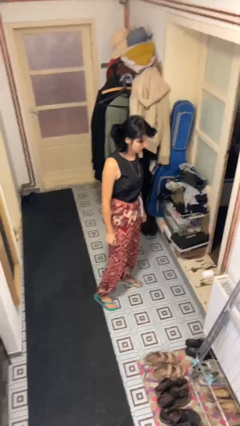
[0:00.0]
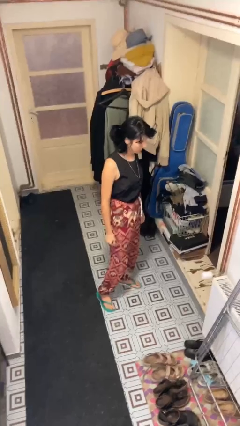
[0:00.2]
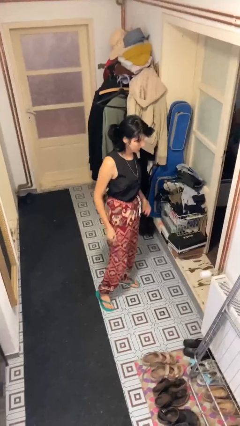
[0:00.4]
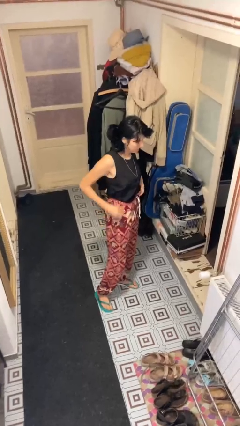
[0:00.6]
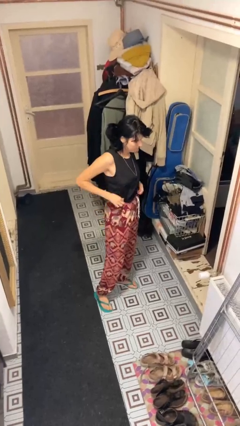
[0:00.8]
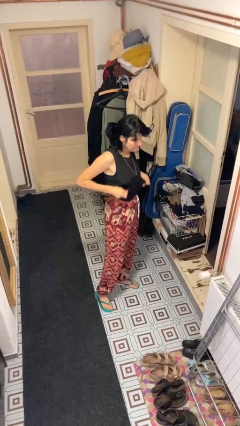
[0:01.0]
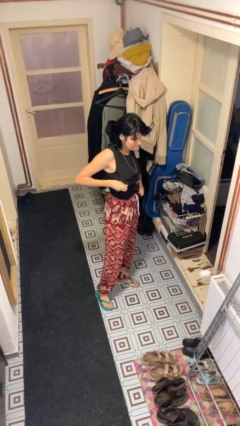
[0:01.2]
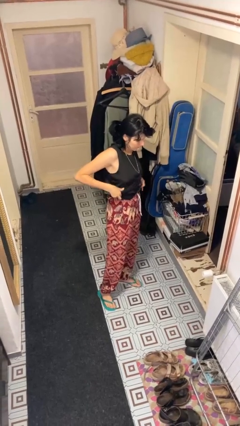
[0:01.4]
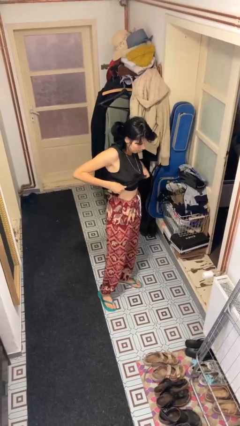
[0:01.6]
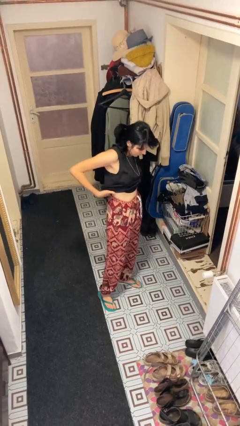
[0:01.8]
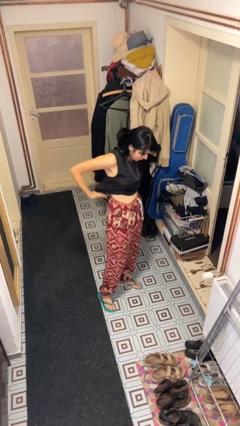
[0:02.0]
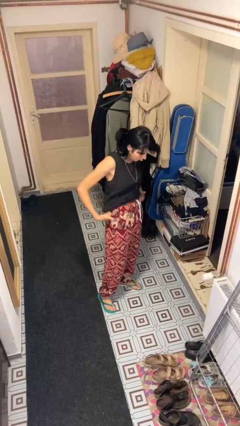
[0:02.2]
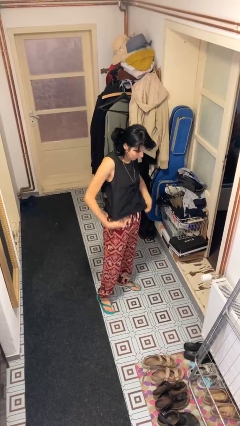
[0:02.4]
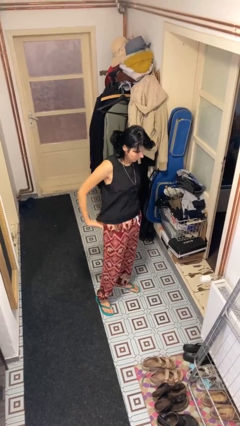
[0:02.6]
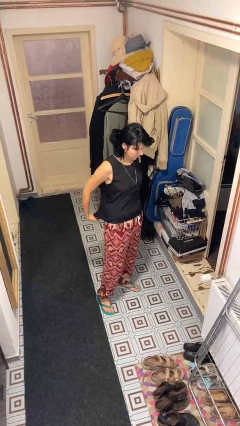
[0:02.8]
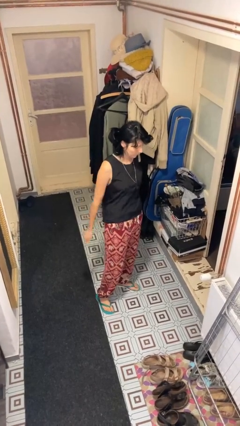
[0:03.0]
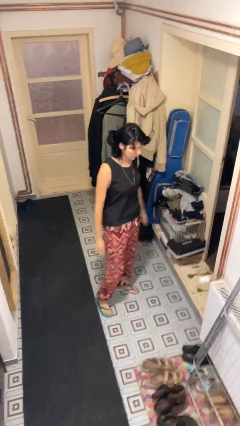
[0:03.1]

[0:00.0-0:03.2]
person untucks shirt

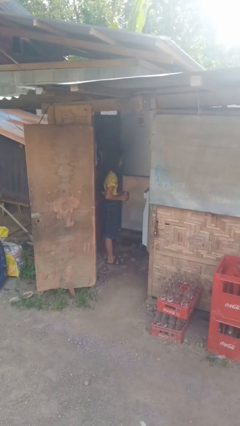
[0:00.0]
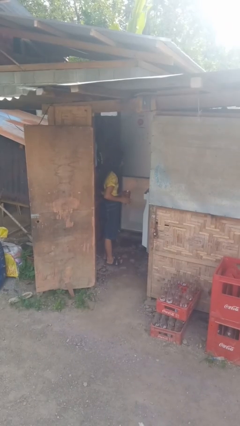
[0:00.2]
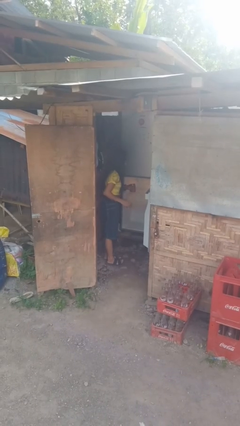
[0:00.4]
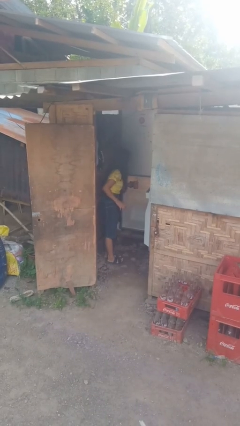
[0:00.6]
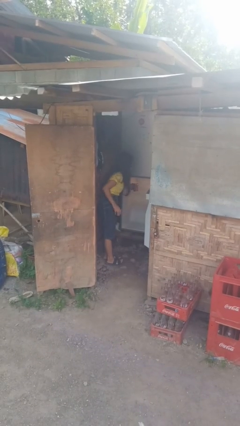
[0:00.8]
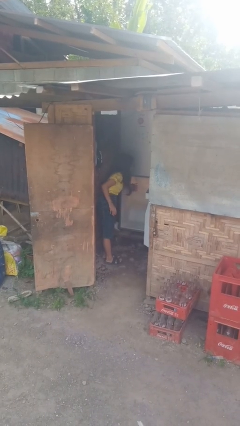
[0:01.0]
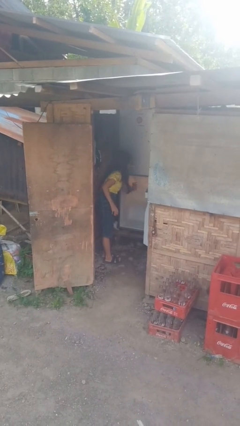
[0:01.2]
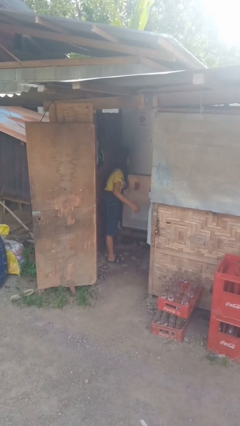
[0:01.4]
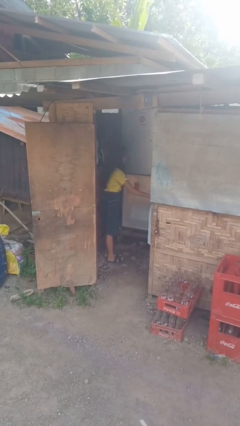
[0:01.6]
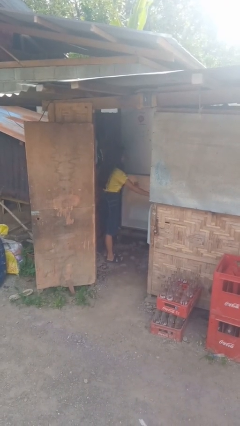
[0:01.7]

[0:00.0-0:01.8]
person puts object into refrigerator

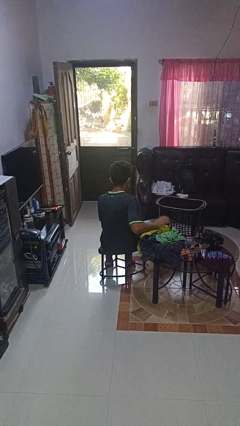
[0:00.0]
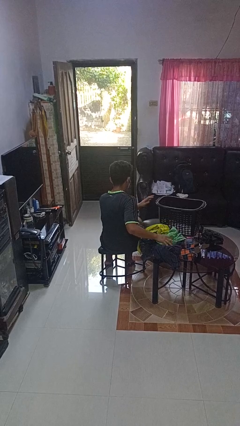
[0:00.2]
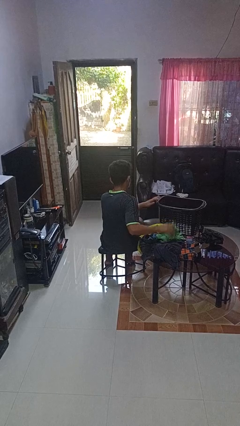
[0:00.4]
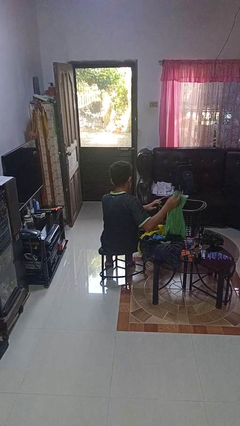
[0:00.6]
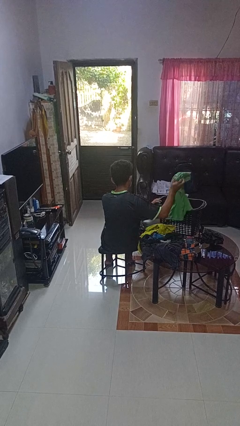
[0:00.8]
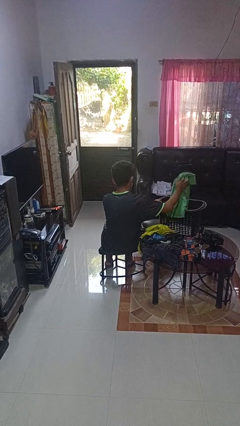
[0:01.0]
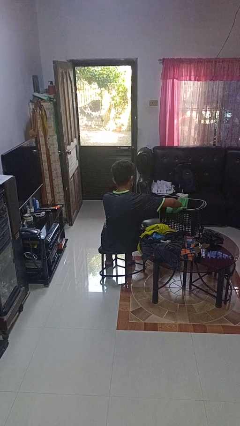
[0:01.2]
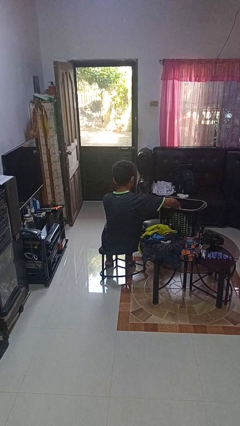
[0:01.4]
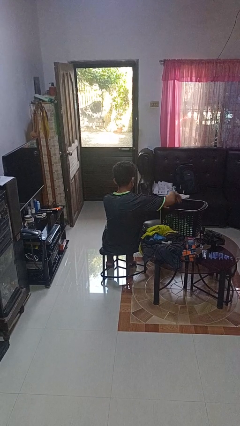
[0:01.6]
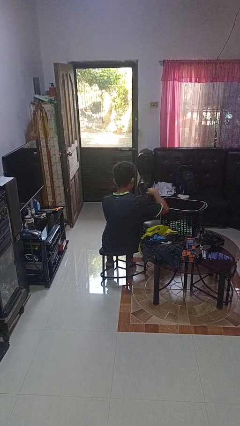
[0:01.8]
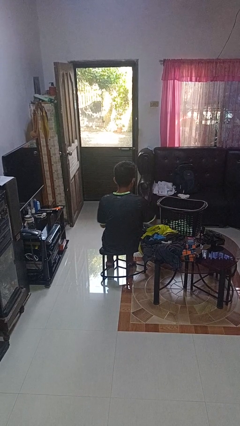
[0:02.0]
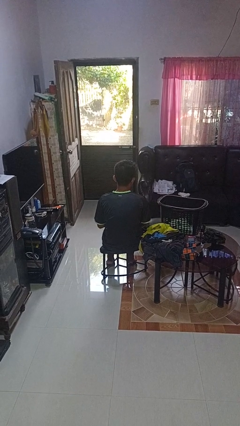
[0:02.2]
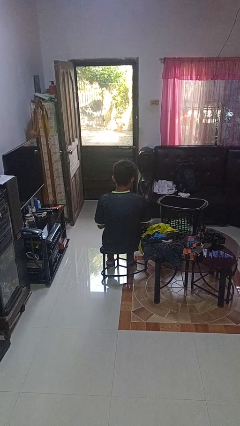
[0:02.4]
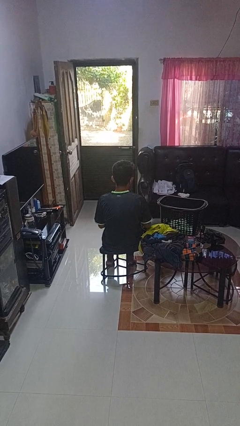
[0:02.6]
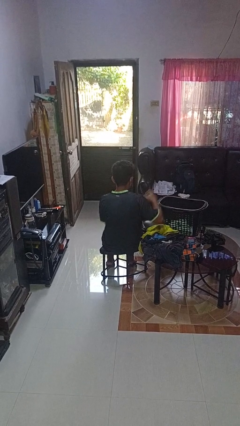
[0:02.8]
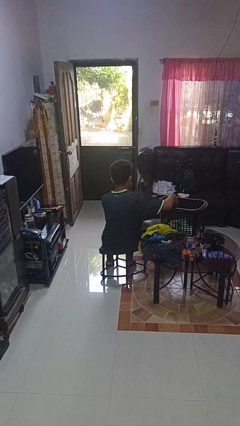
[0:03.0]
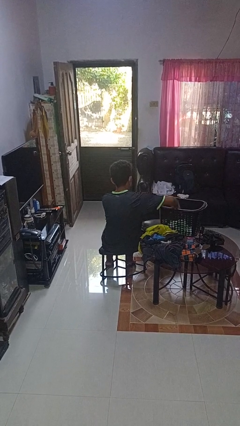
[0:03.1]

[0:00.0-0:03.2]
person puts object into basket

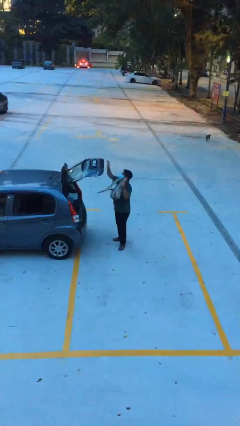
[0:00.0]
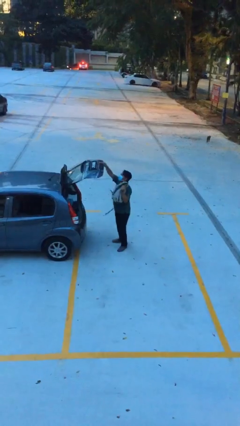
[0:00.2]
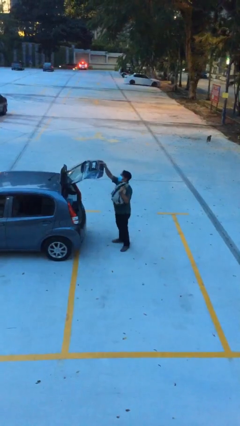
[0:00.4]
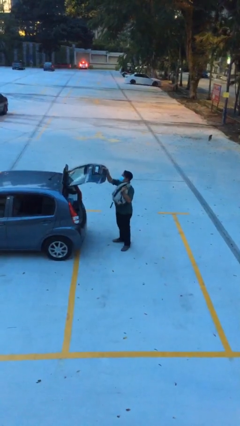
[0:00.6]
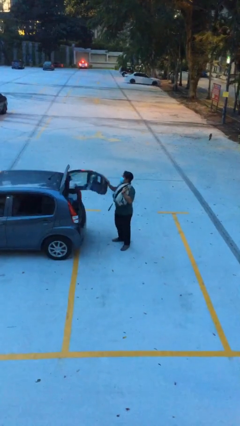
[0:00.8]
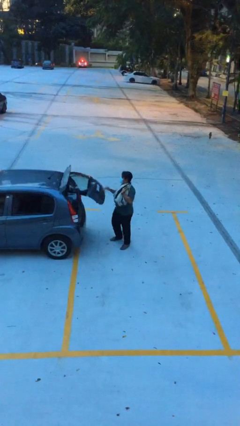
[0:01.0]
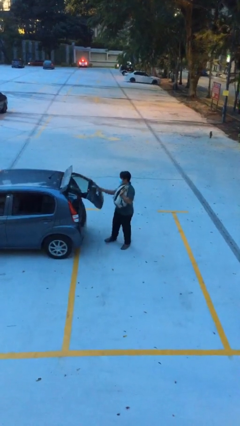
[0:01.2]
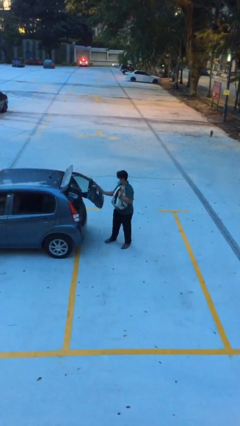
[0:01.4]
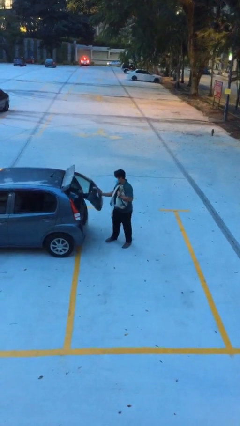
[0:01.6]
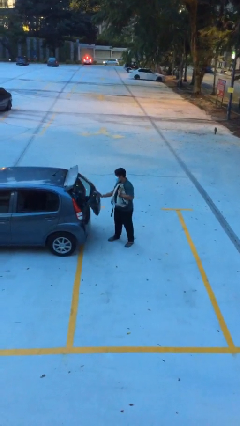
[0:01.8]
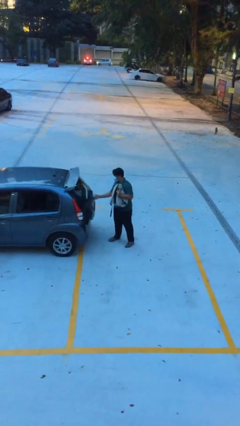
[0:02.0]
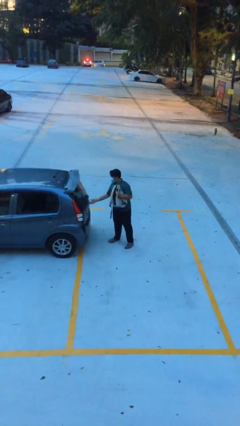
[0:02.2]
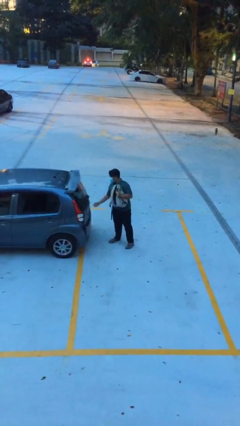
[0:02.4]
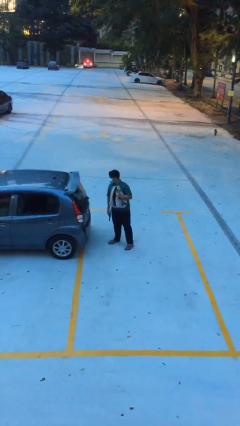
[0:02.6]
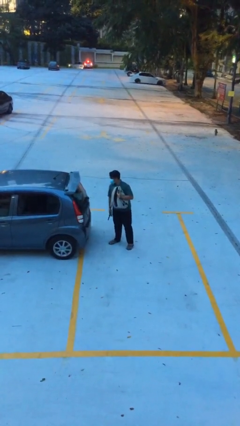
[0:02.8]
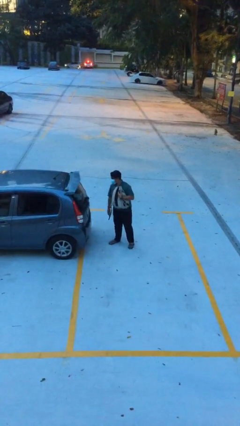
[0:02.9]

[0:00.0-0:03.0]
person closes car trunk

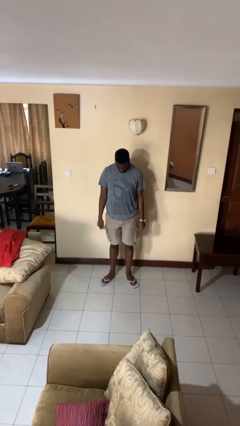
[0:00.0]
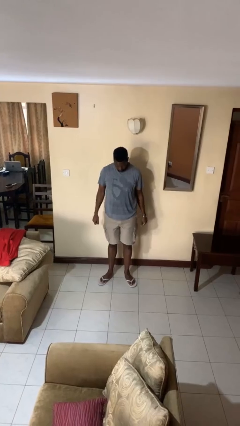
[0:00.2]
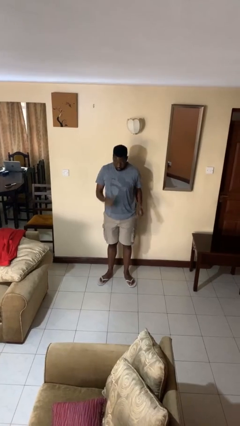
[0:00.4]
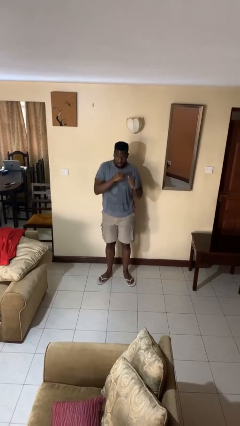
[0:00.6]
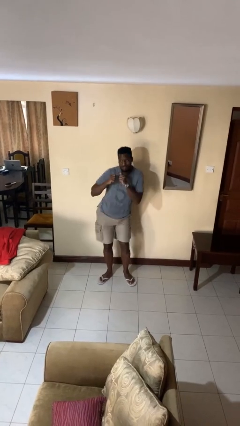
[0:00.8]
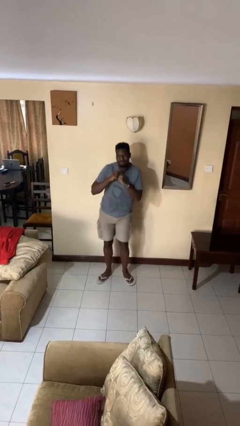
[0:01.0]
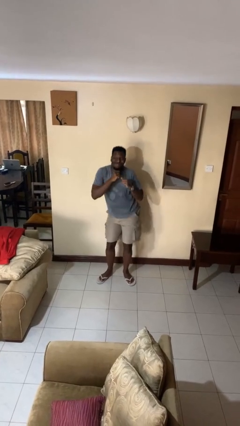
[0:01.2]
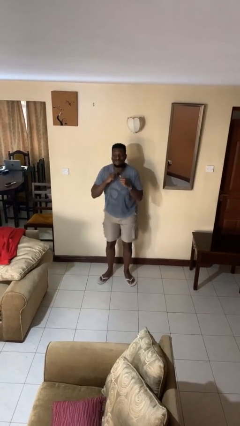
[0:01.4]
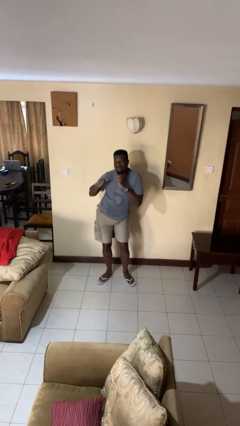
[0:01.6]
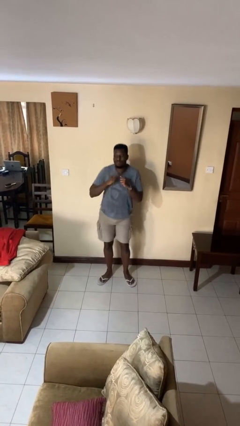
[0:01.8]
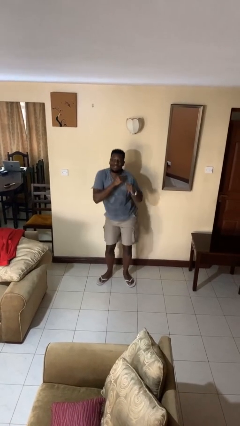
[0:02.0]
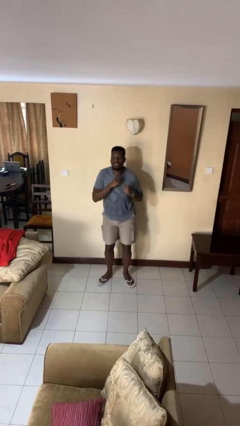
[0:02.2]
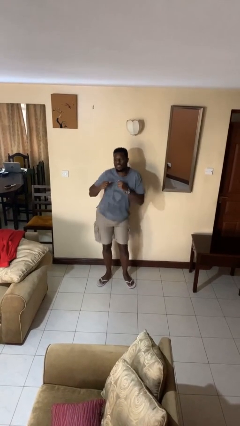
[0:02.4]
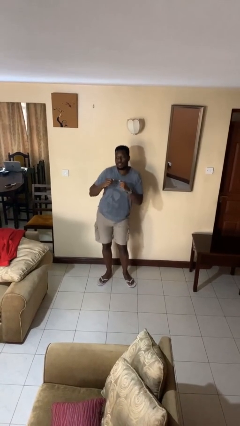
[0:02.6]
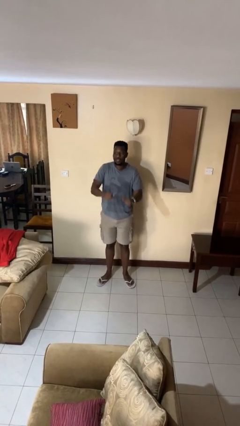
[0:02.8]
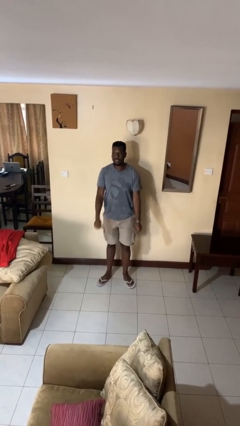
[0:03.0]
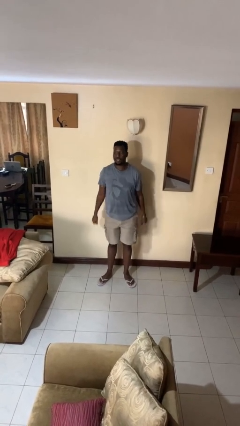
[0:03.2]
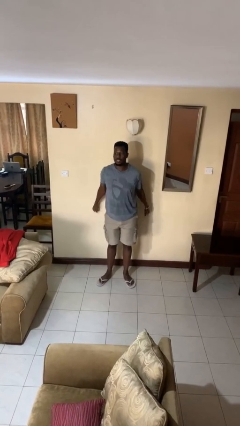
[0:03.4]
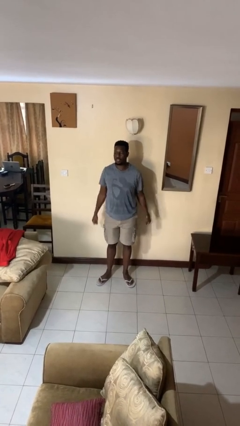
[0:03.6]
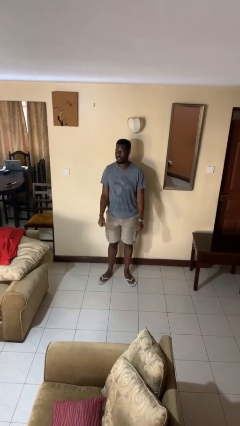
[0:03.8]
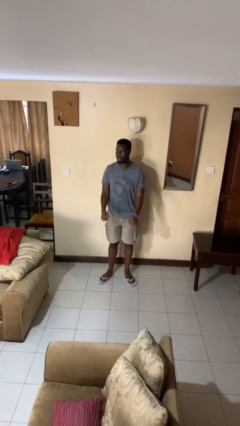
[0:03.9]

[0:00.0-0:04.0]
person wiggles hips

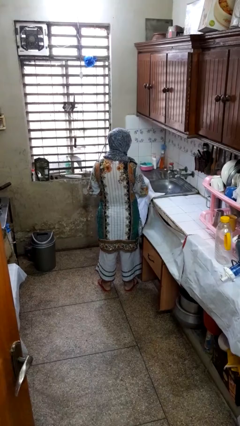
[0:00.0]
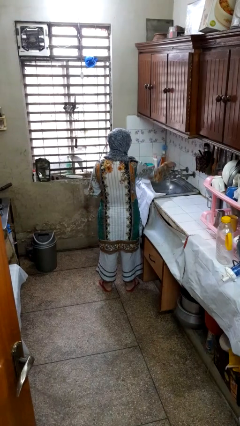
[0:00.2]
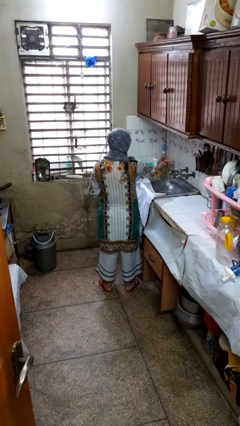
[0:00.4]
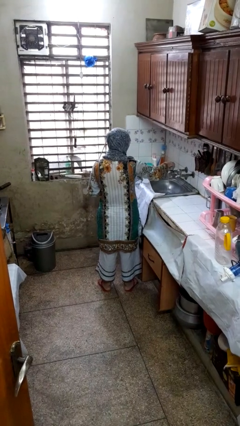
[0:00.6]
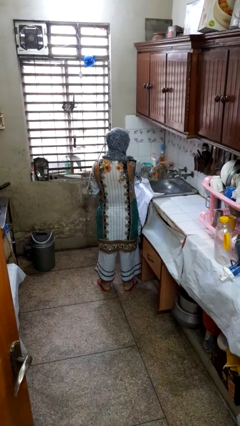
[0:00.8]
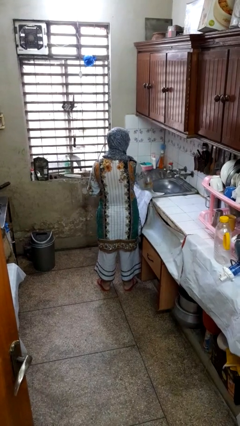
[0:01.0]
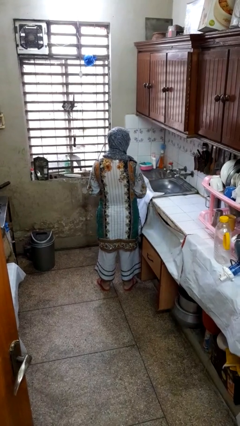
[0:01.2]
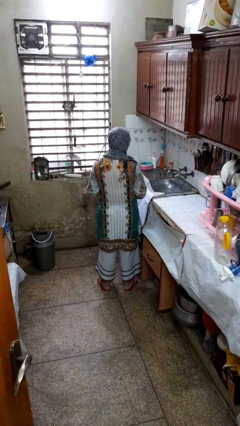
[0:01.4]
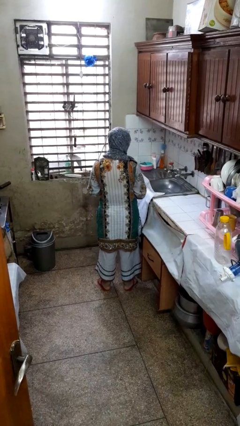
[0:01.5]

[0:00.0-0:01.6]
person turns off faucet

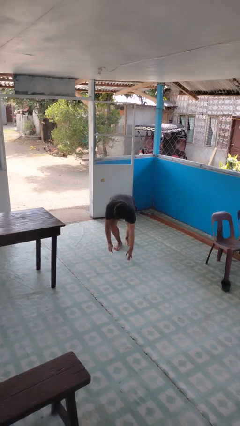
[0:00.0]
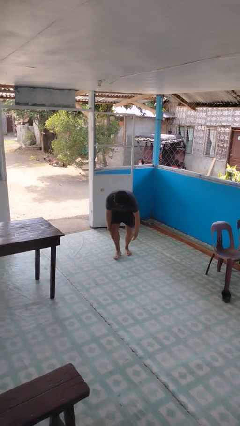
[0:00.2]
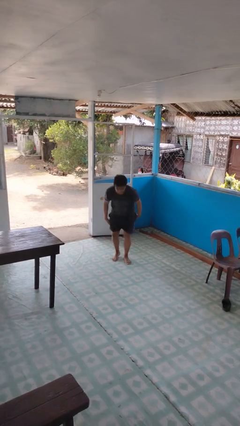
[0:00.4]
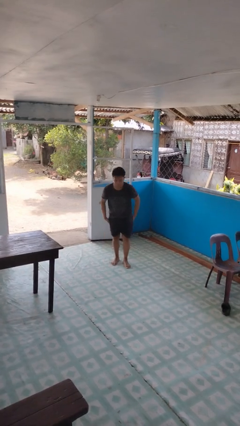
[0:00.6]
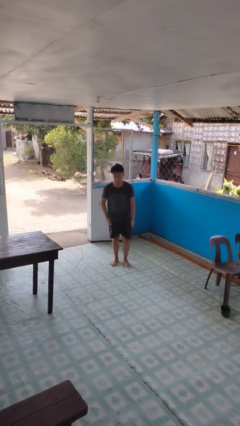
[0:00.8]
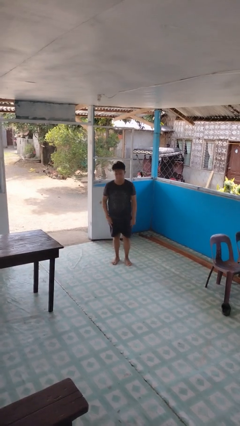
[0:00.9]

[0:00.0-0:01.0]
person stands up from floor
